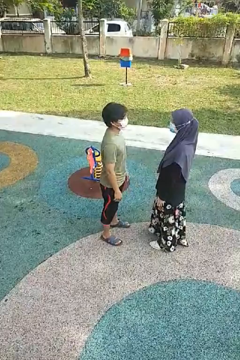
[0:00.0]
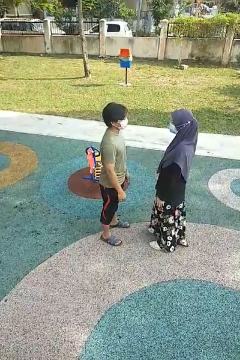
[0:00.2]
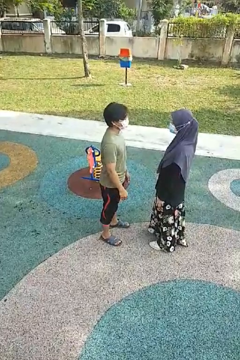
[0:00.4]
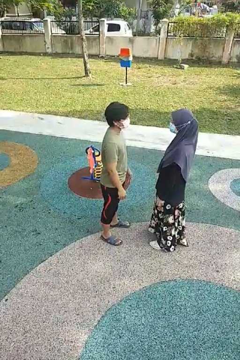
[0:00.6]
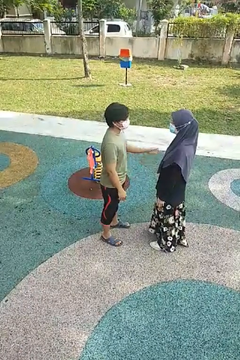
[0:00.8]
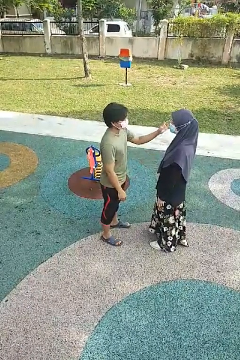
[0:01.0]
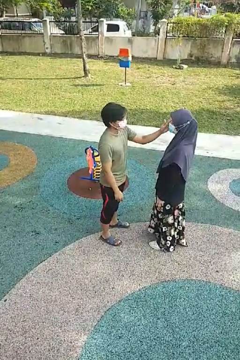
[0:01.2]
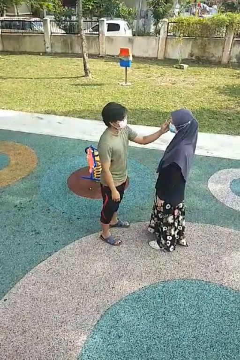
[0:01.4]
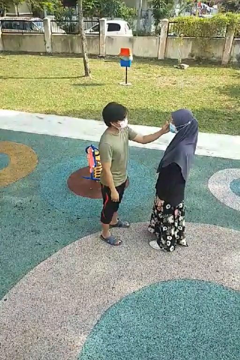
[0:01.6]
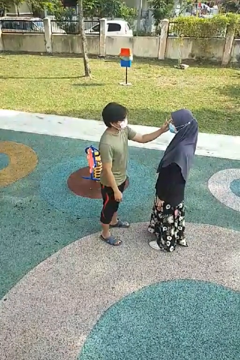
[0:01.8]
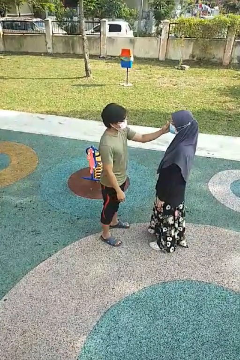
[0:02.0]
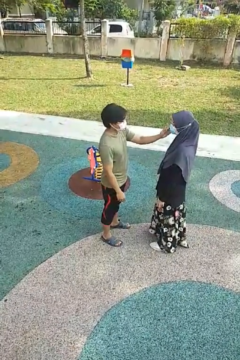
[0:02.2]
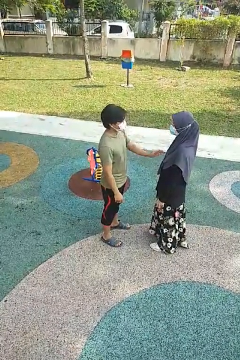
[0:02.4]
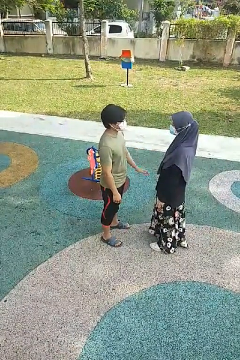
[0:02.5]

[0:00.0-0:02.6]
person touches face of person

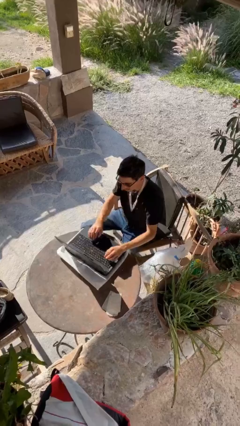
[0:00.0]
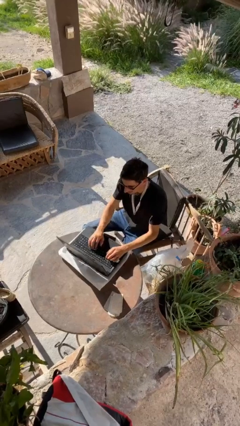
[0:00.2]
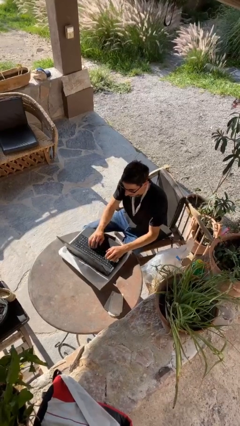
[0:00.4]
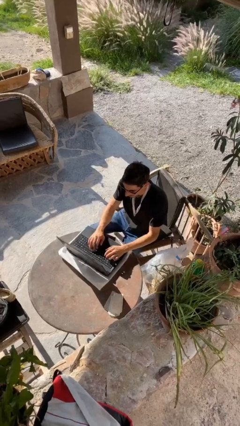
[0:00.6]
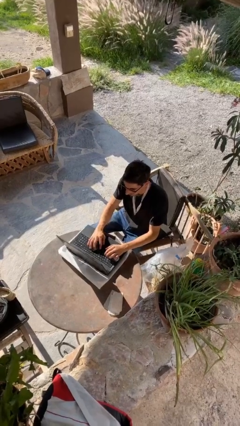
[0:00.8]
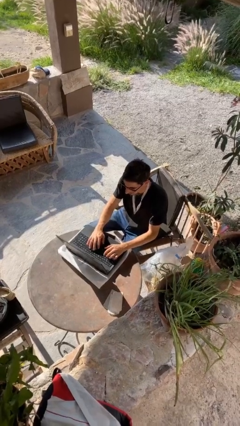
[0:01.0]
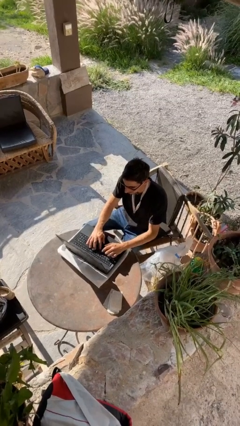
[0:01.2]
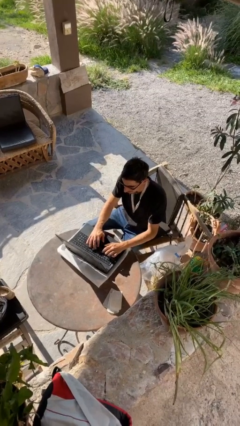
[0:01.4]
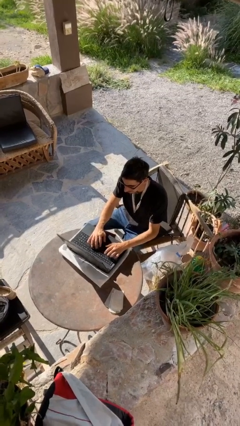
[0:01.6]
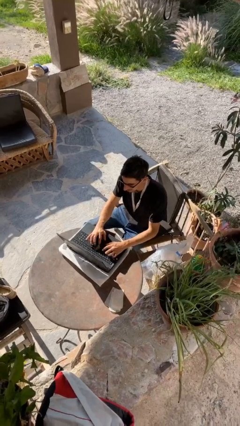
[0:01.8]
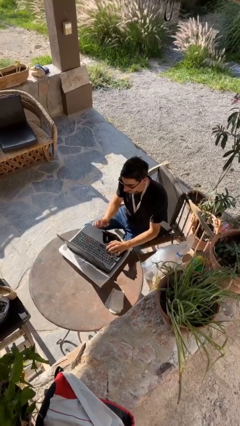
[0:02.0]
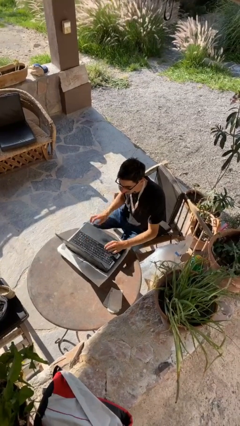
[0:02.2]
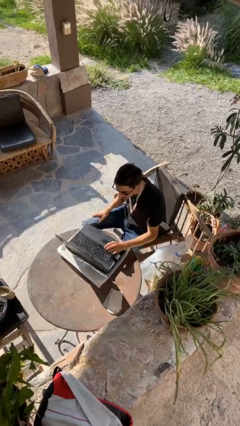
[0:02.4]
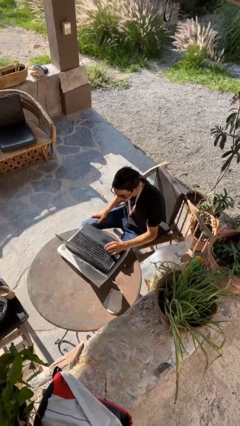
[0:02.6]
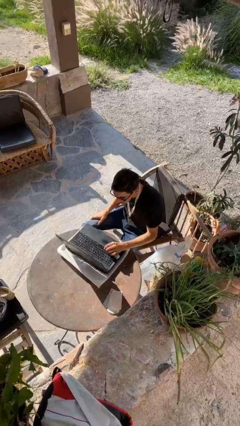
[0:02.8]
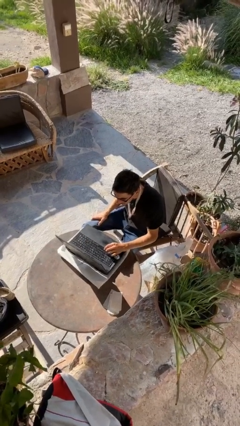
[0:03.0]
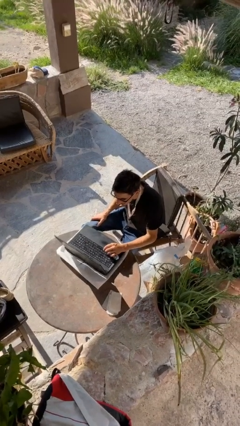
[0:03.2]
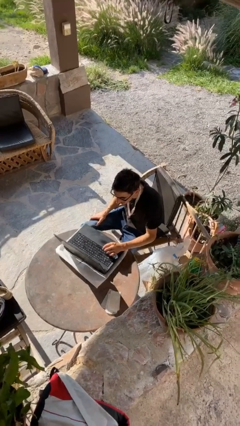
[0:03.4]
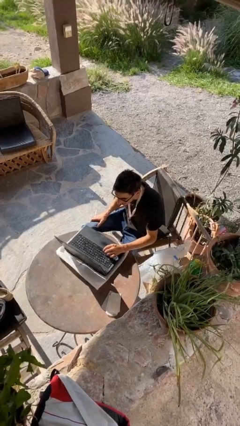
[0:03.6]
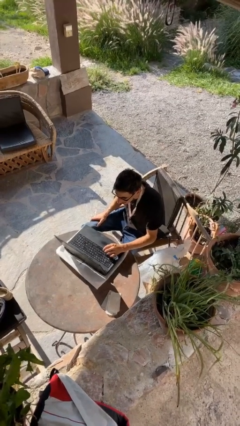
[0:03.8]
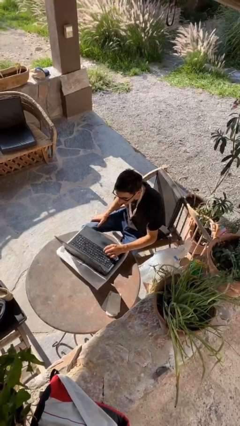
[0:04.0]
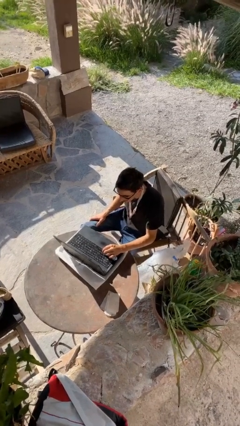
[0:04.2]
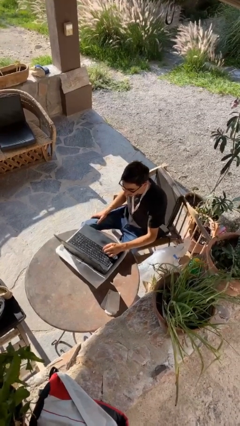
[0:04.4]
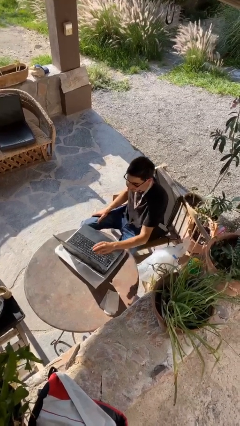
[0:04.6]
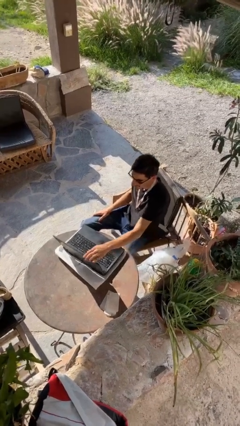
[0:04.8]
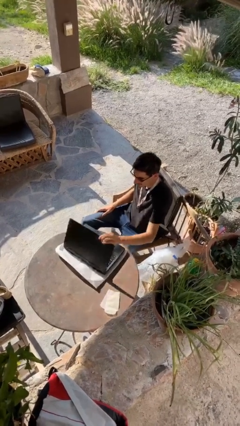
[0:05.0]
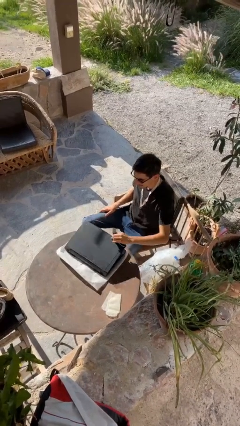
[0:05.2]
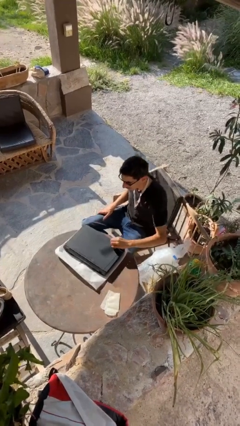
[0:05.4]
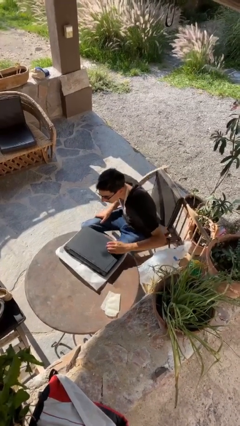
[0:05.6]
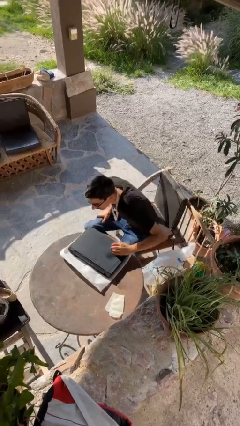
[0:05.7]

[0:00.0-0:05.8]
person interacts with laptop

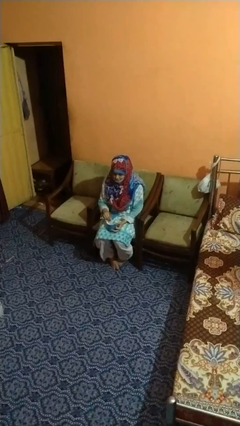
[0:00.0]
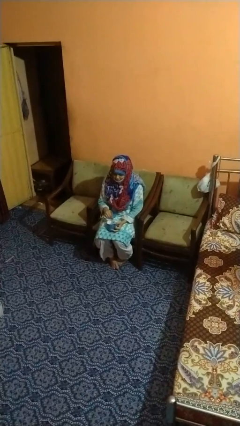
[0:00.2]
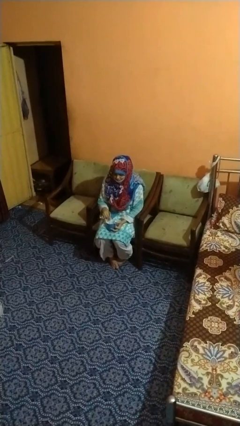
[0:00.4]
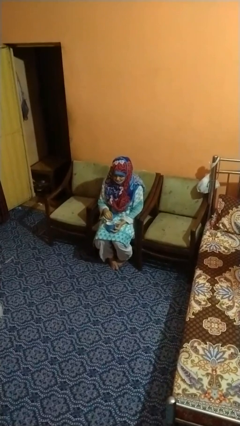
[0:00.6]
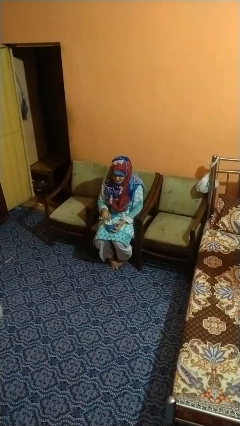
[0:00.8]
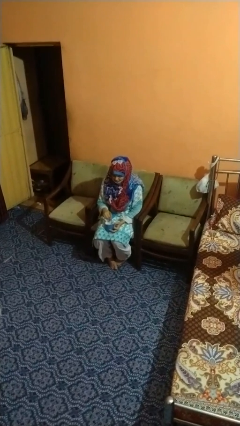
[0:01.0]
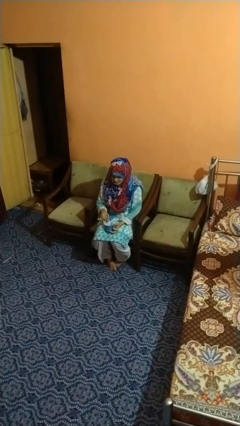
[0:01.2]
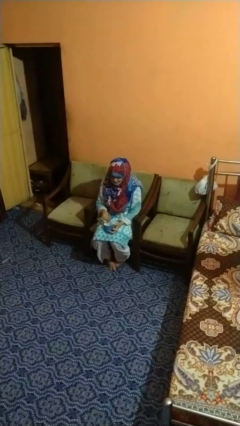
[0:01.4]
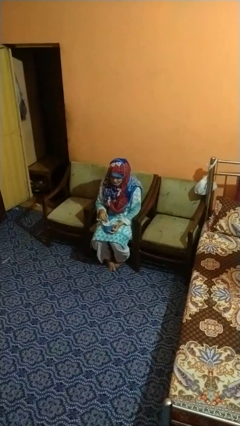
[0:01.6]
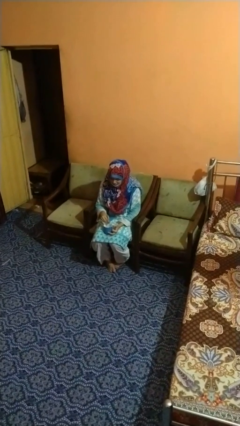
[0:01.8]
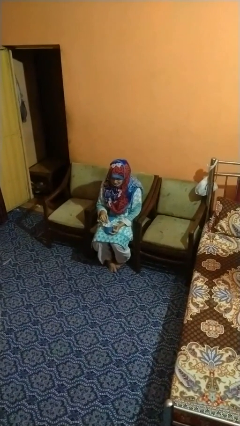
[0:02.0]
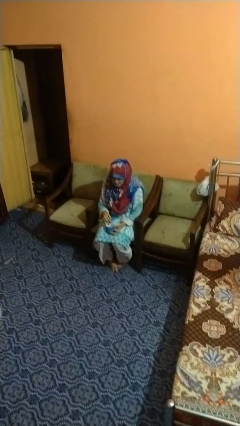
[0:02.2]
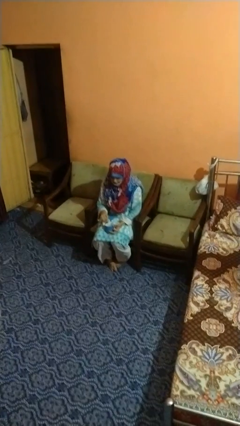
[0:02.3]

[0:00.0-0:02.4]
person stirs mug

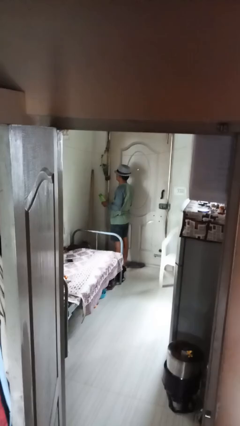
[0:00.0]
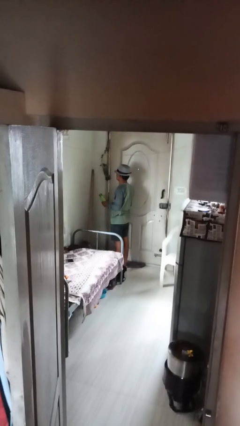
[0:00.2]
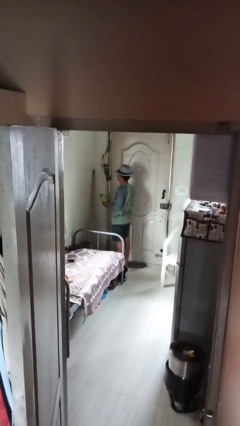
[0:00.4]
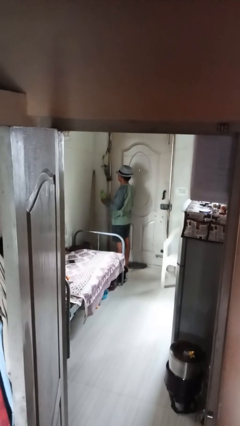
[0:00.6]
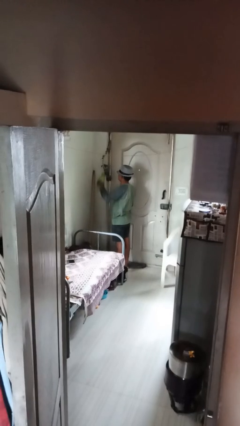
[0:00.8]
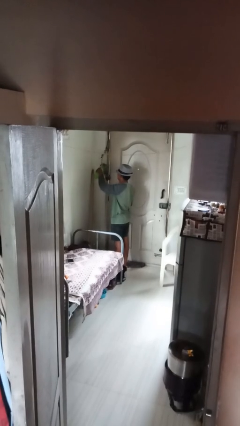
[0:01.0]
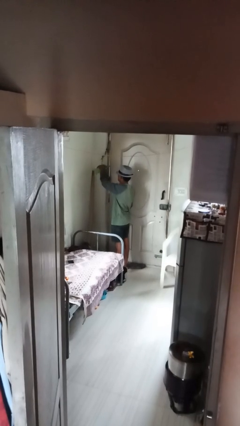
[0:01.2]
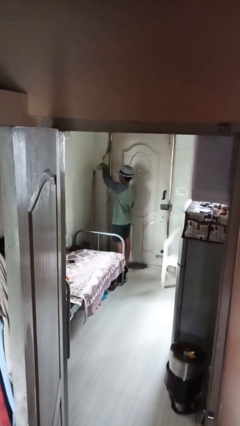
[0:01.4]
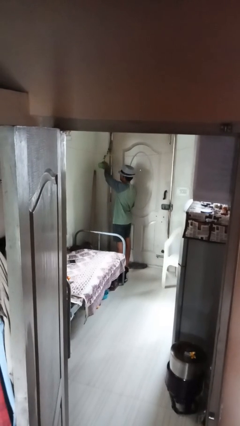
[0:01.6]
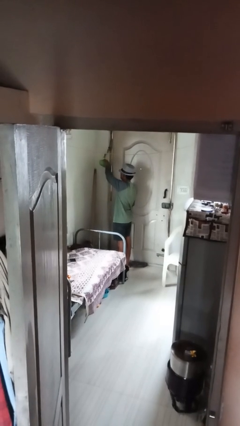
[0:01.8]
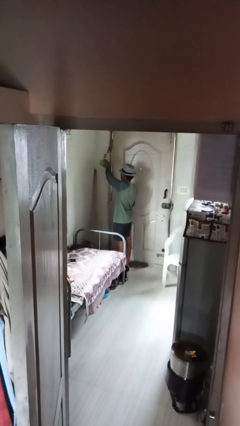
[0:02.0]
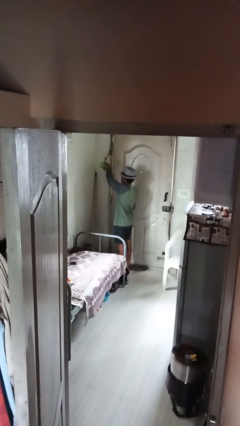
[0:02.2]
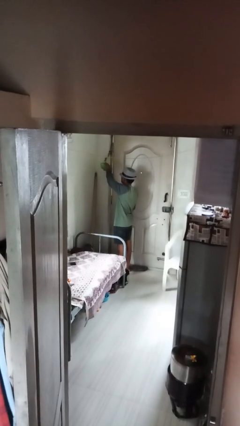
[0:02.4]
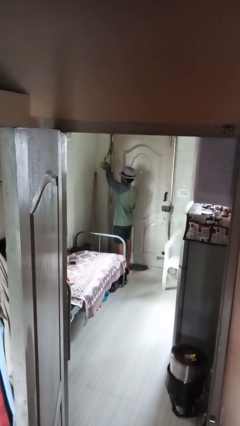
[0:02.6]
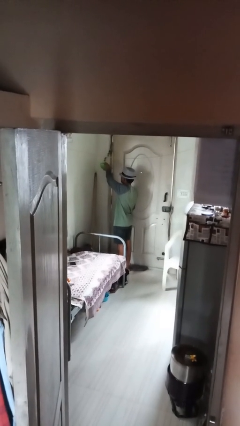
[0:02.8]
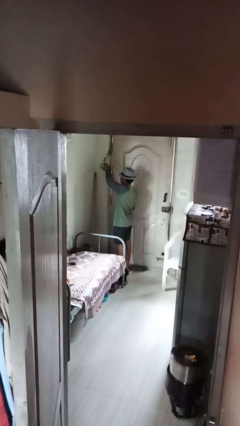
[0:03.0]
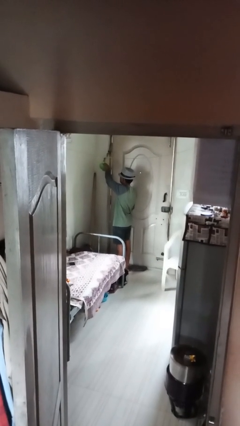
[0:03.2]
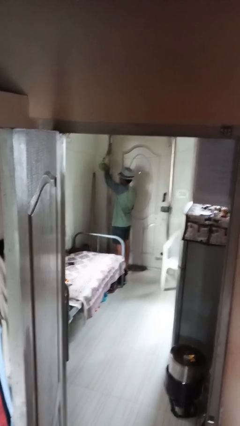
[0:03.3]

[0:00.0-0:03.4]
person waters houseplant

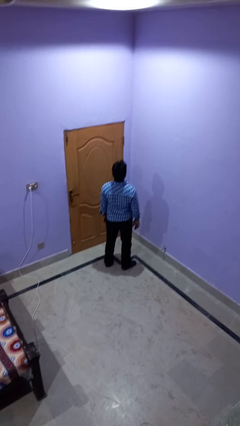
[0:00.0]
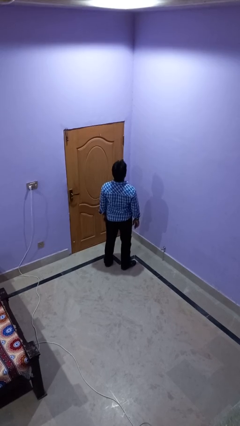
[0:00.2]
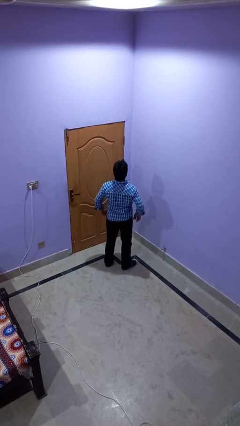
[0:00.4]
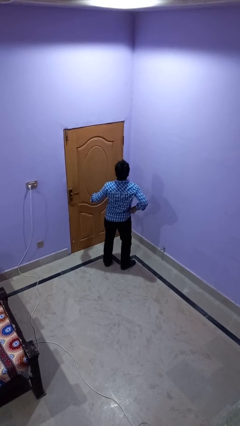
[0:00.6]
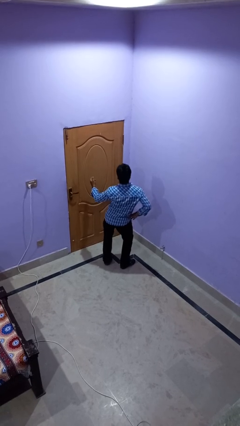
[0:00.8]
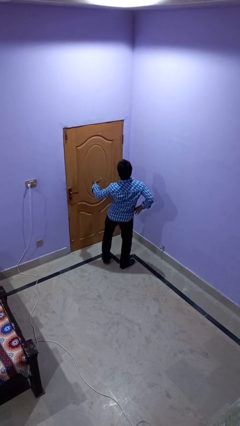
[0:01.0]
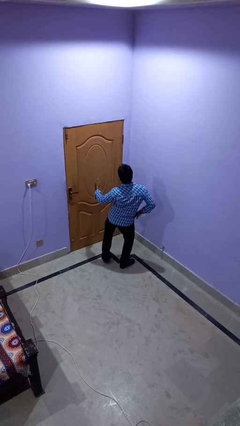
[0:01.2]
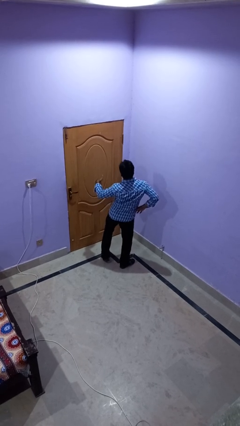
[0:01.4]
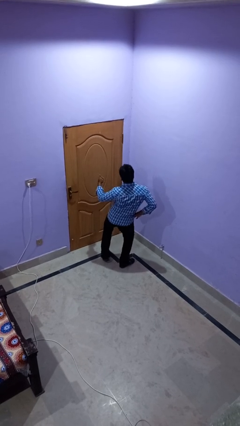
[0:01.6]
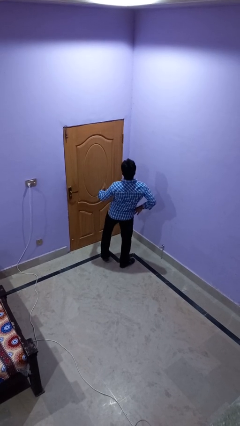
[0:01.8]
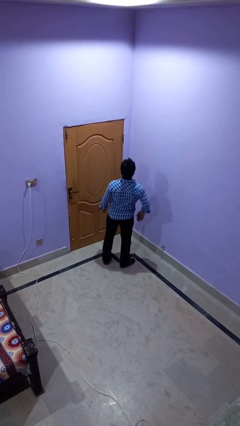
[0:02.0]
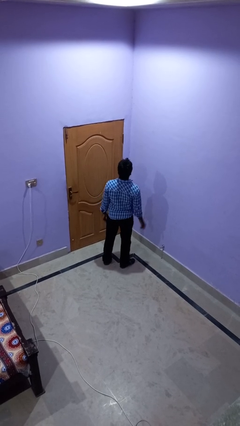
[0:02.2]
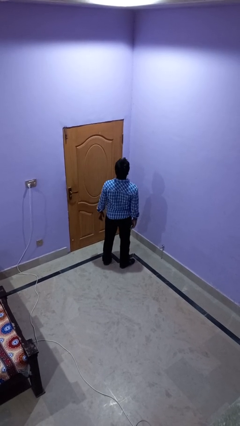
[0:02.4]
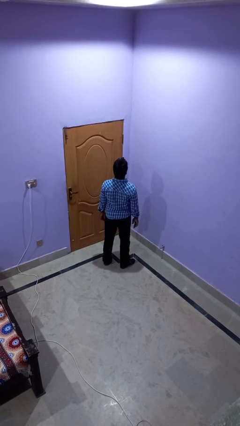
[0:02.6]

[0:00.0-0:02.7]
person dances in place

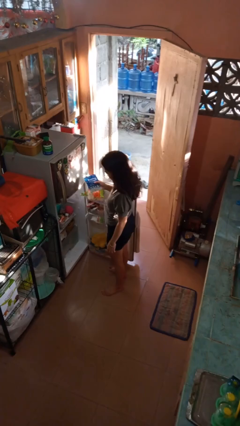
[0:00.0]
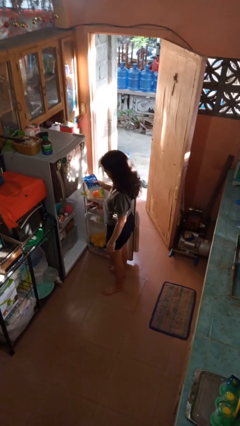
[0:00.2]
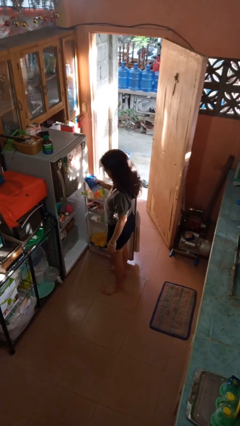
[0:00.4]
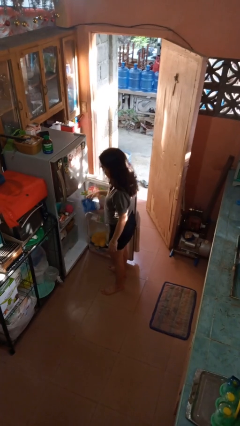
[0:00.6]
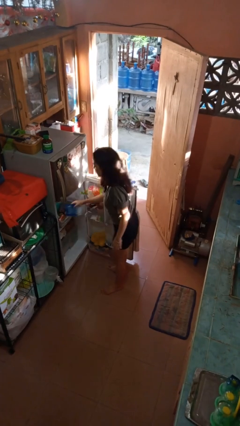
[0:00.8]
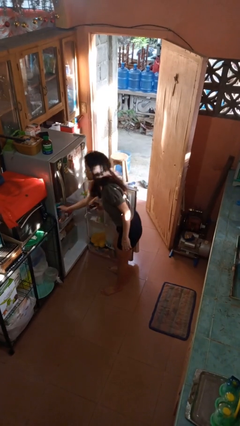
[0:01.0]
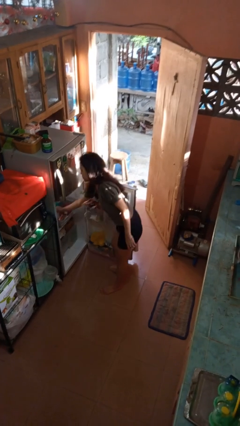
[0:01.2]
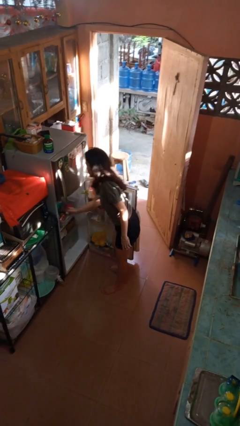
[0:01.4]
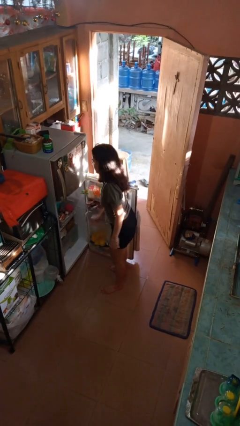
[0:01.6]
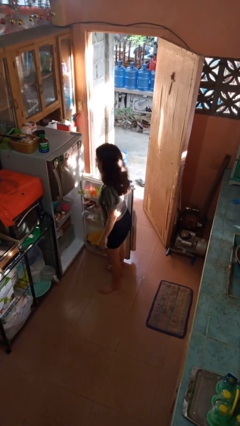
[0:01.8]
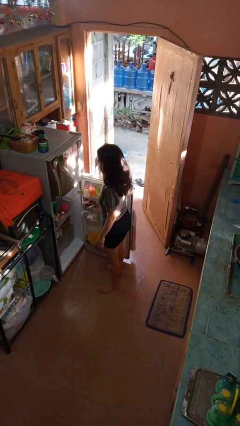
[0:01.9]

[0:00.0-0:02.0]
person puts object into refrigerator
